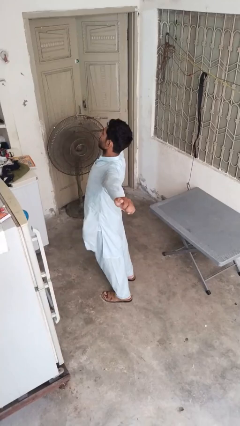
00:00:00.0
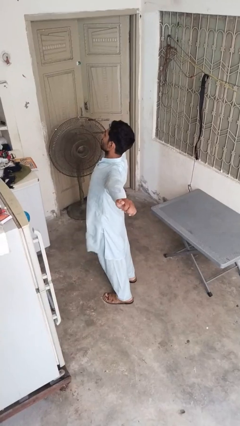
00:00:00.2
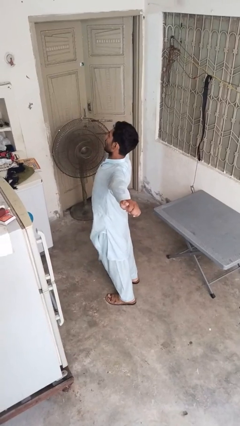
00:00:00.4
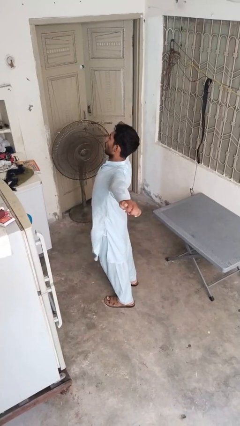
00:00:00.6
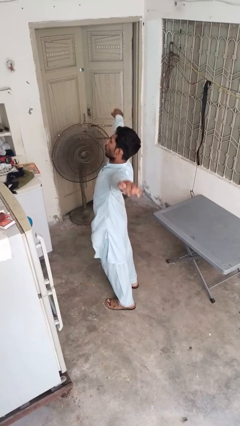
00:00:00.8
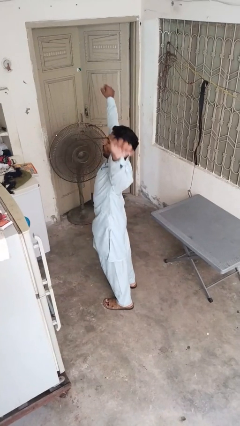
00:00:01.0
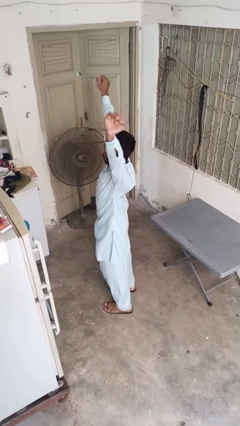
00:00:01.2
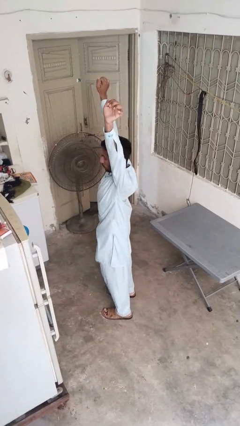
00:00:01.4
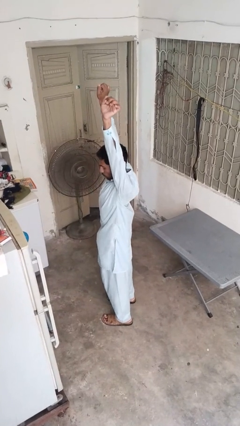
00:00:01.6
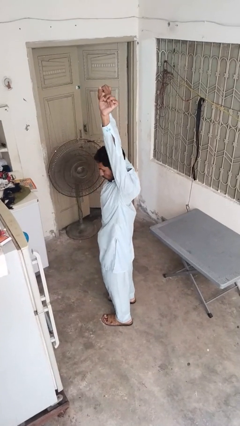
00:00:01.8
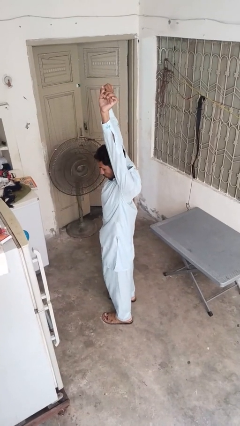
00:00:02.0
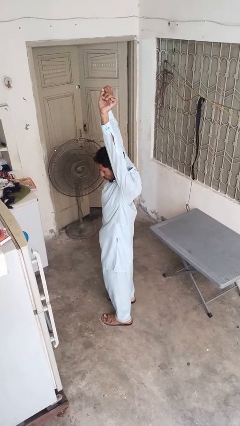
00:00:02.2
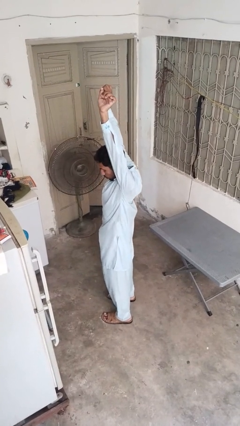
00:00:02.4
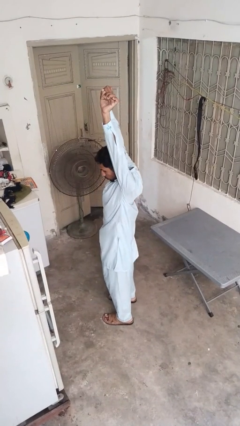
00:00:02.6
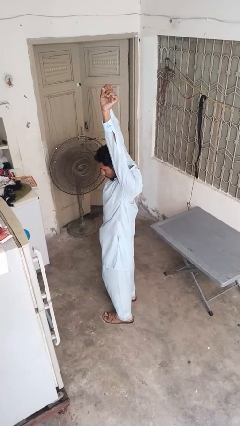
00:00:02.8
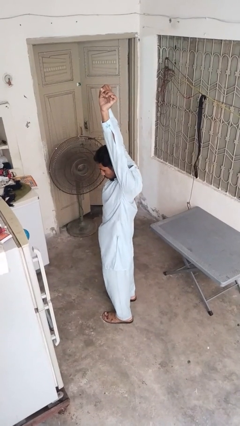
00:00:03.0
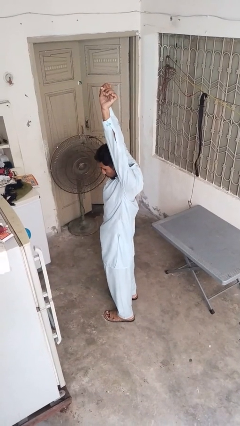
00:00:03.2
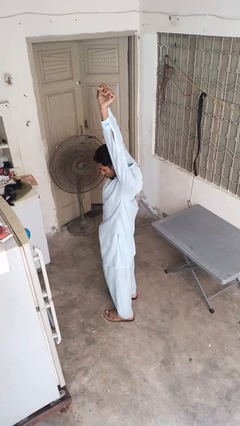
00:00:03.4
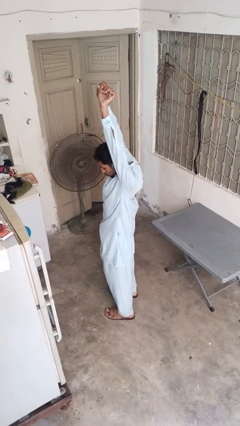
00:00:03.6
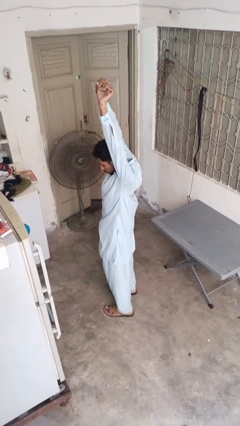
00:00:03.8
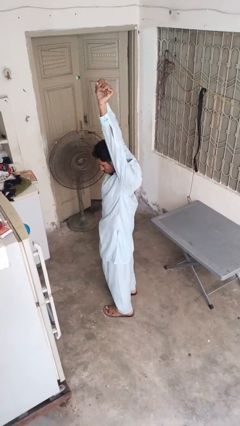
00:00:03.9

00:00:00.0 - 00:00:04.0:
person stretches arms over head

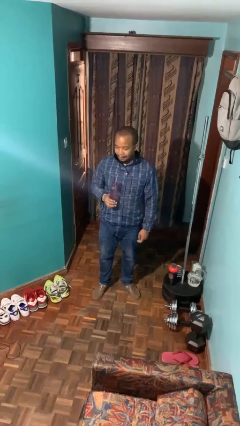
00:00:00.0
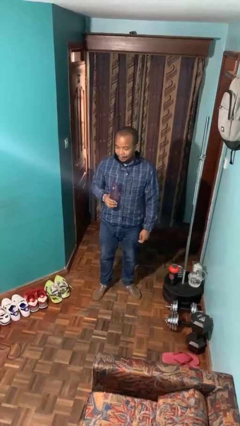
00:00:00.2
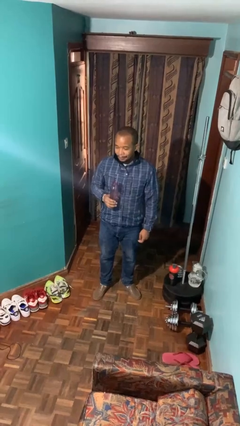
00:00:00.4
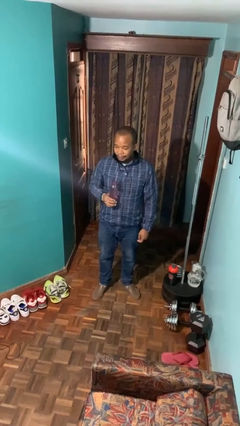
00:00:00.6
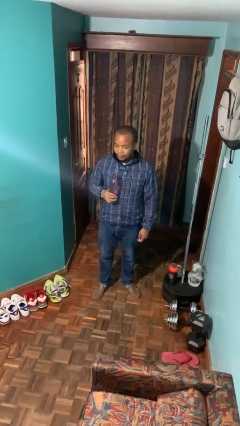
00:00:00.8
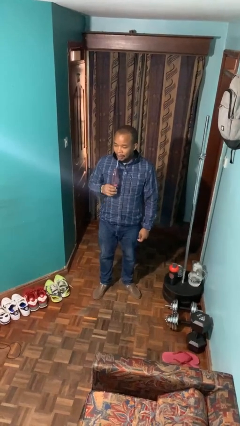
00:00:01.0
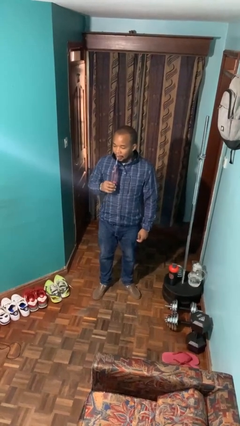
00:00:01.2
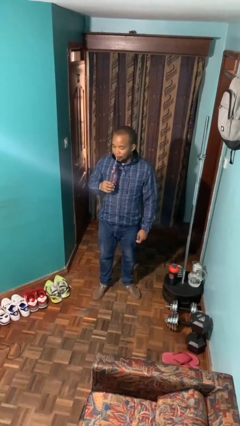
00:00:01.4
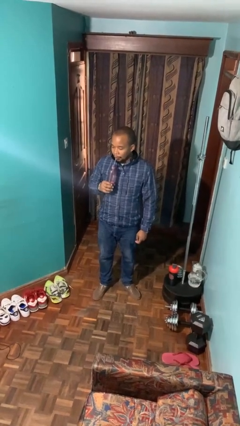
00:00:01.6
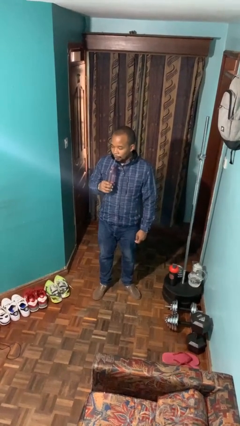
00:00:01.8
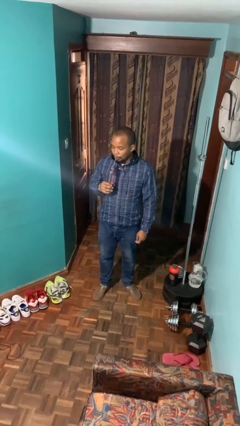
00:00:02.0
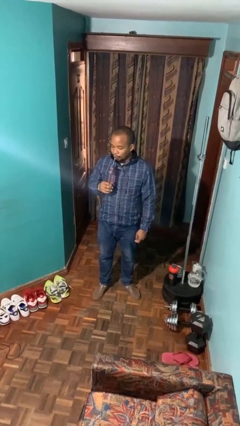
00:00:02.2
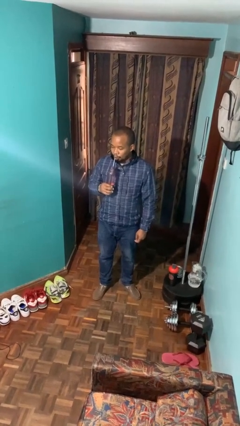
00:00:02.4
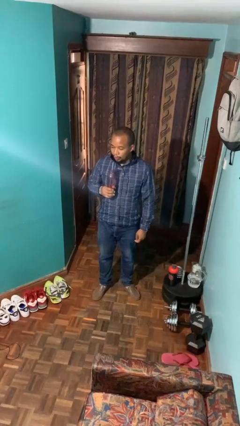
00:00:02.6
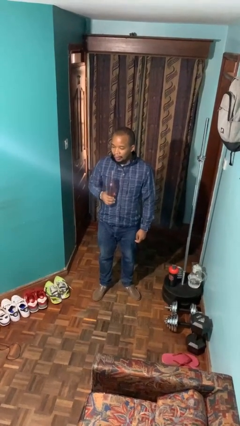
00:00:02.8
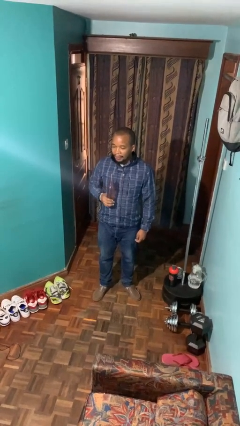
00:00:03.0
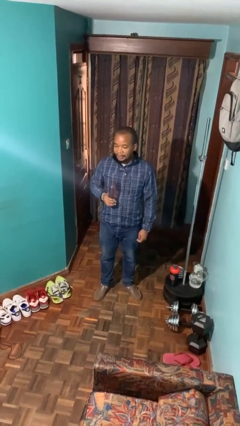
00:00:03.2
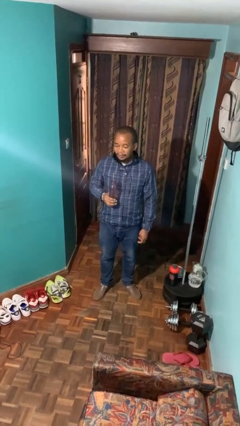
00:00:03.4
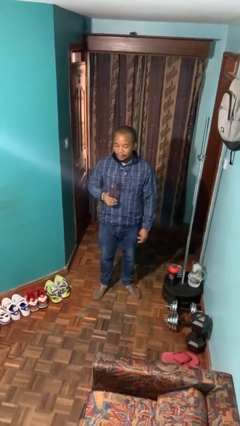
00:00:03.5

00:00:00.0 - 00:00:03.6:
person drinks from straw

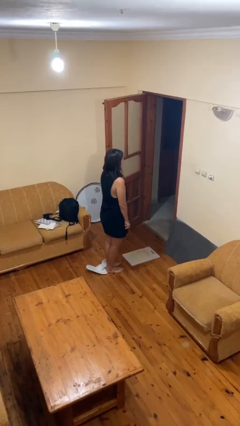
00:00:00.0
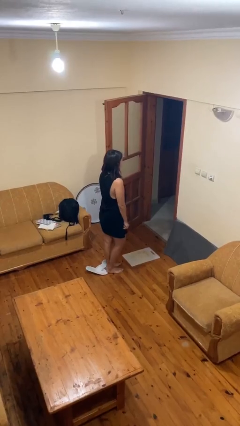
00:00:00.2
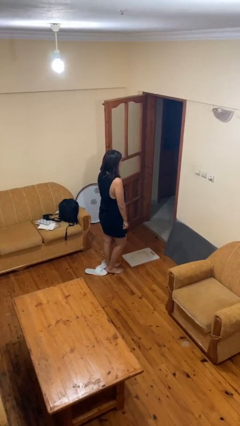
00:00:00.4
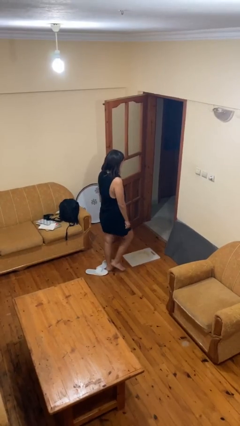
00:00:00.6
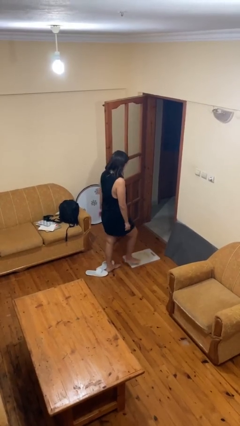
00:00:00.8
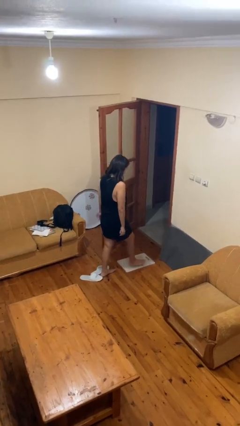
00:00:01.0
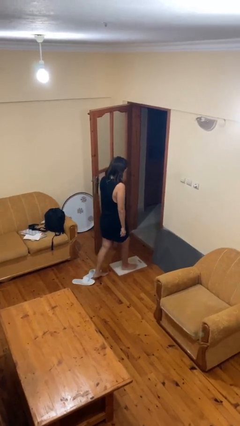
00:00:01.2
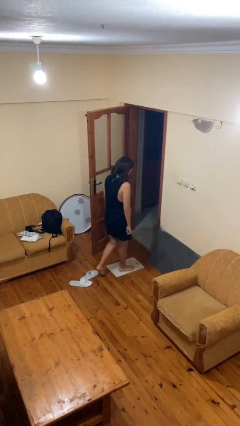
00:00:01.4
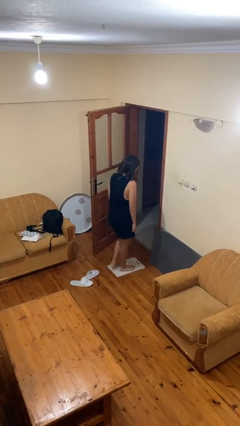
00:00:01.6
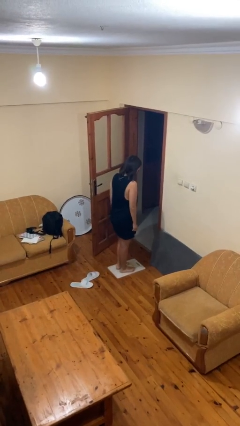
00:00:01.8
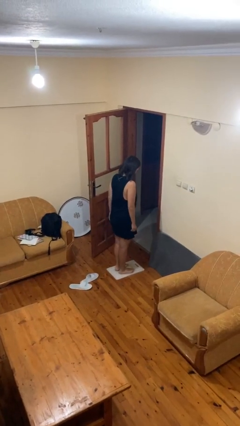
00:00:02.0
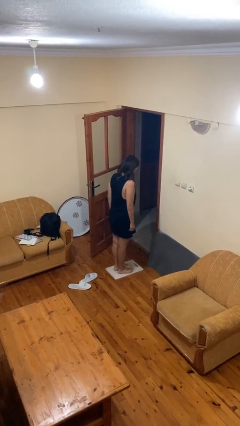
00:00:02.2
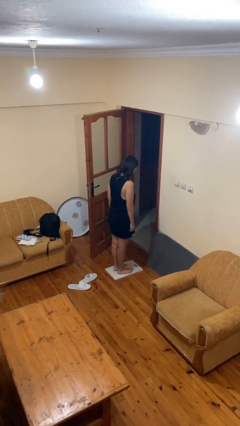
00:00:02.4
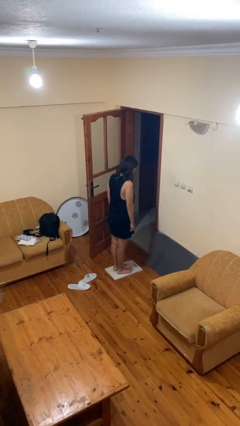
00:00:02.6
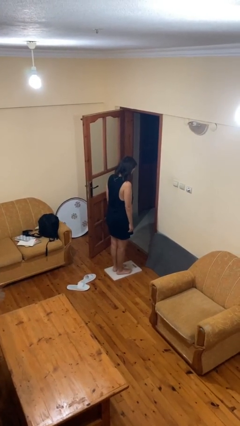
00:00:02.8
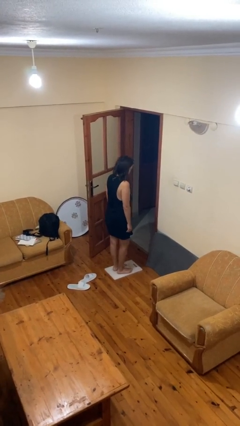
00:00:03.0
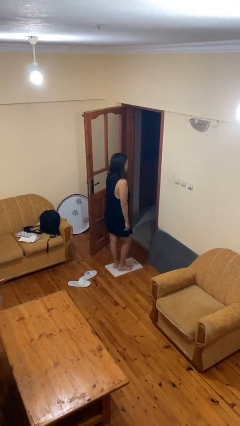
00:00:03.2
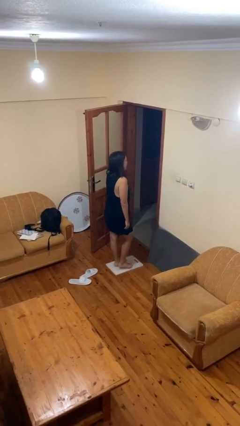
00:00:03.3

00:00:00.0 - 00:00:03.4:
person uses bodyweight scale

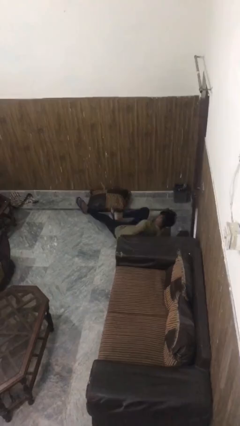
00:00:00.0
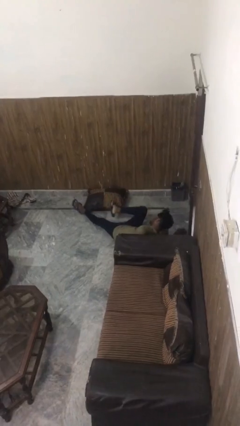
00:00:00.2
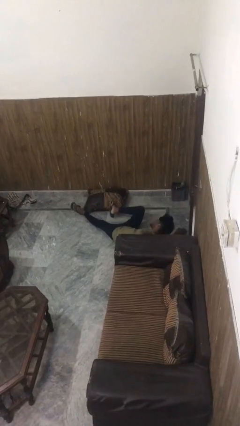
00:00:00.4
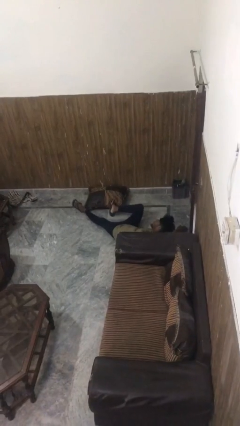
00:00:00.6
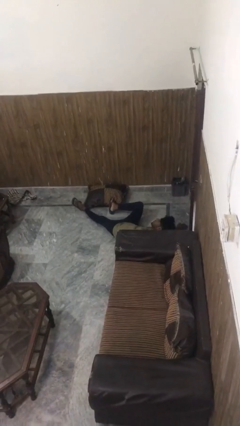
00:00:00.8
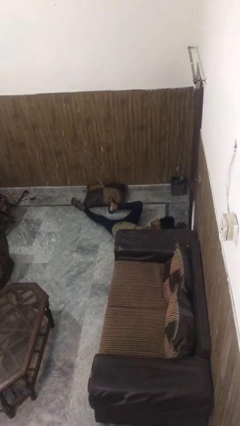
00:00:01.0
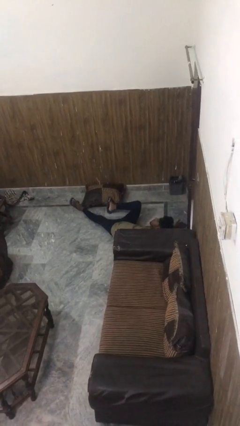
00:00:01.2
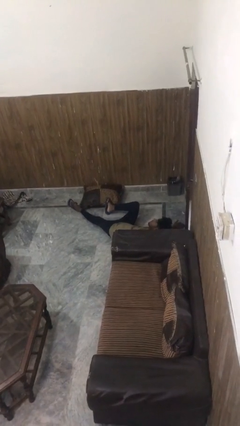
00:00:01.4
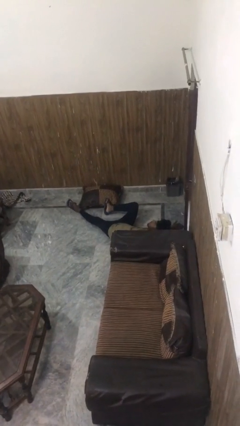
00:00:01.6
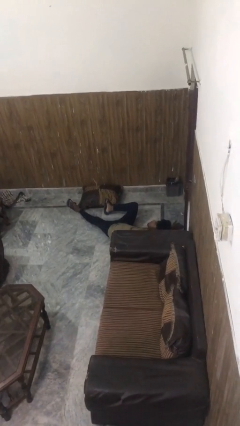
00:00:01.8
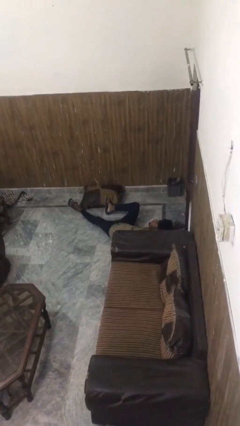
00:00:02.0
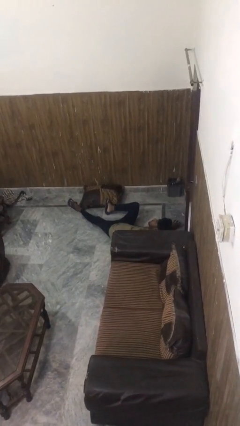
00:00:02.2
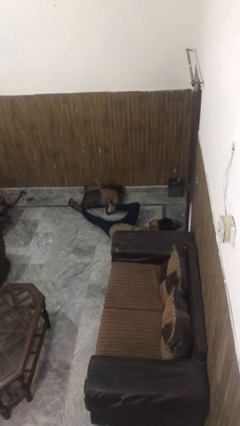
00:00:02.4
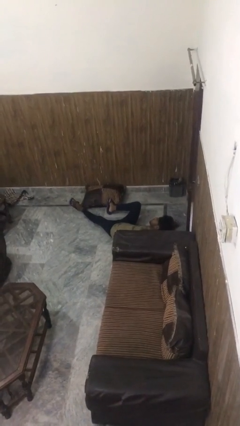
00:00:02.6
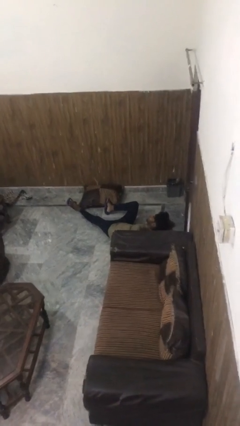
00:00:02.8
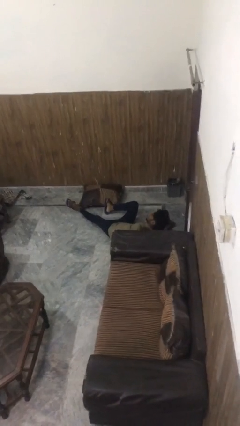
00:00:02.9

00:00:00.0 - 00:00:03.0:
person lies down on floor

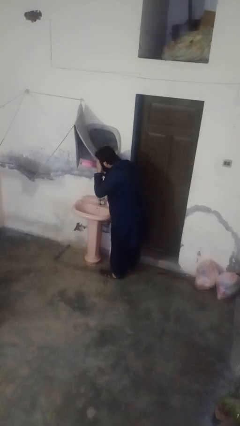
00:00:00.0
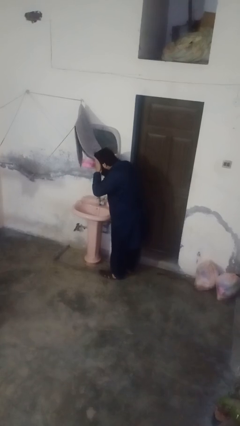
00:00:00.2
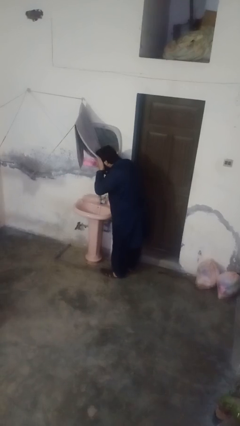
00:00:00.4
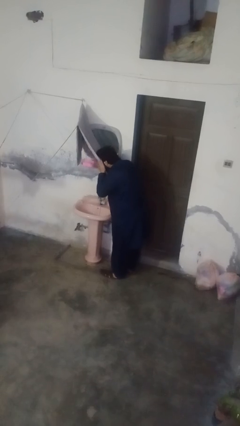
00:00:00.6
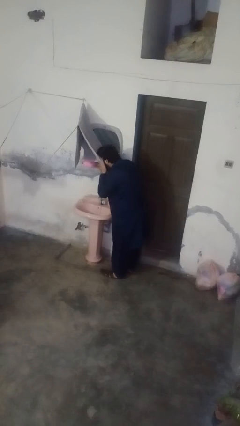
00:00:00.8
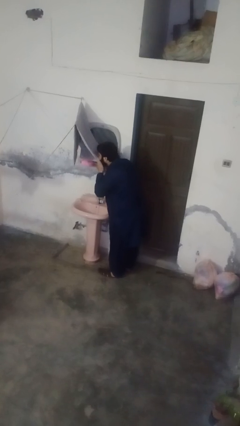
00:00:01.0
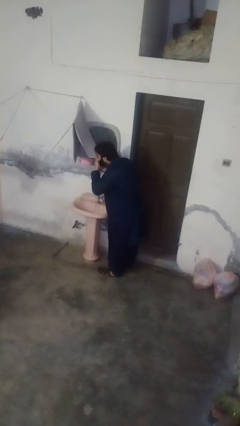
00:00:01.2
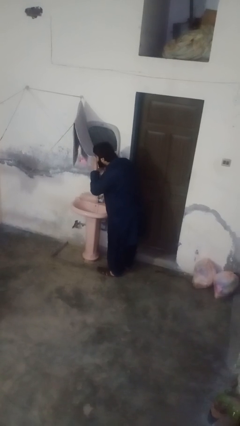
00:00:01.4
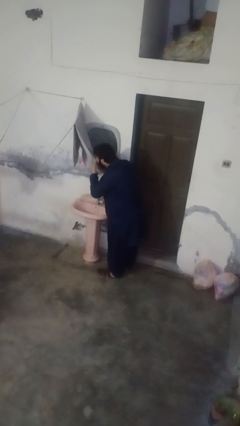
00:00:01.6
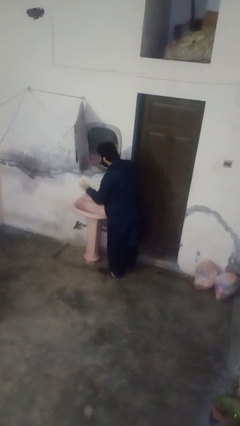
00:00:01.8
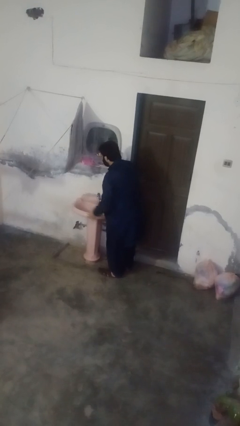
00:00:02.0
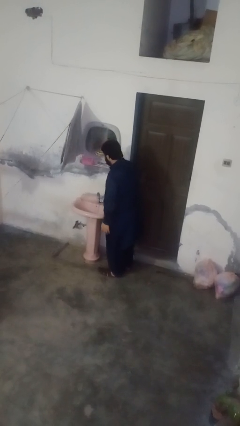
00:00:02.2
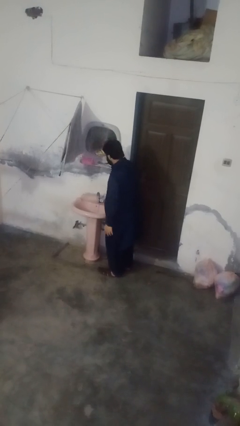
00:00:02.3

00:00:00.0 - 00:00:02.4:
person dries face with towel

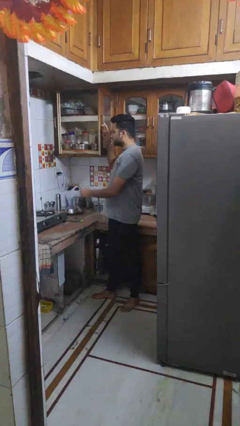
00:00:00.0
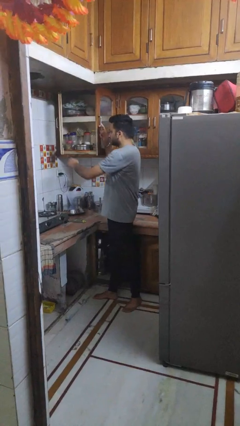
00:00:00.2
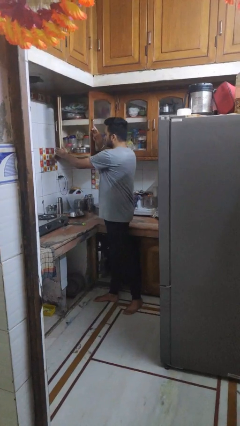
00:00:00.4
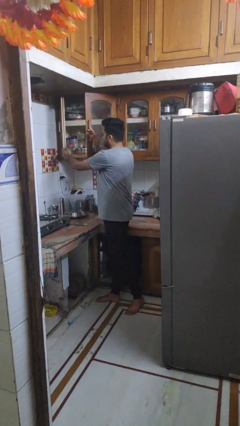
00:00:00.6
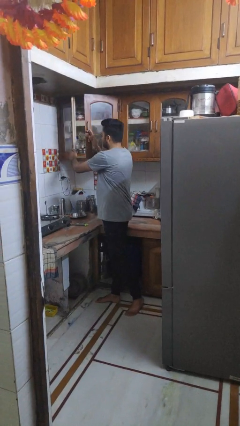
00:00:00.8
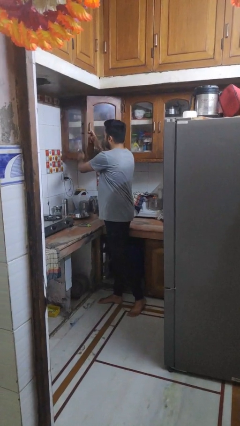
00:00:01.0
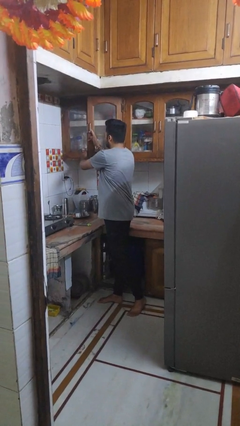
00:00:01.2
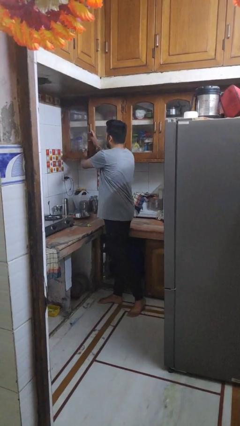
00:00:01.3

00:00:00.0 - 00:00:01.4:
person closes cabinet
